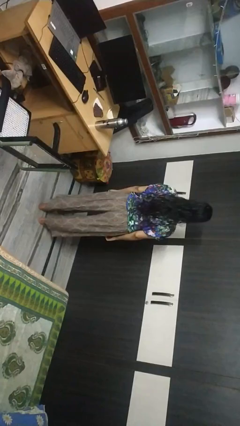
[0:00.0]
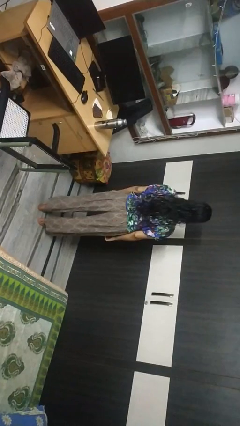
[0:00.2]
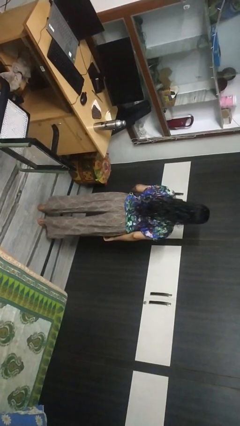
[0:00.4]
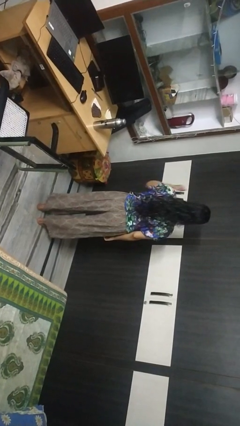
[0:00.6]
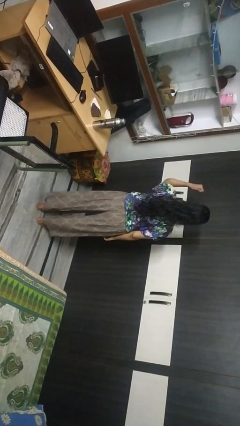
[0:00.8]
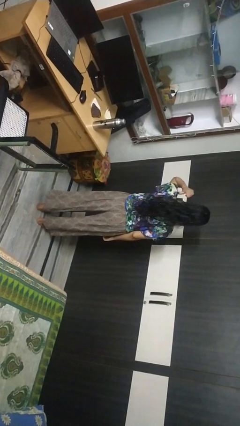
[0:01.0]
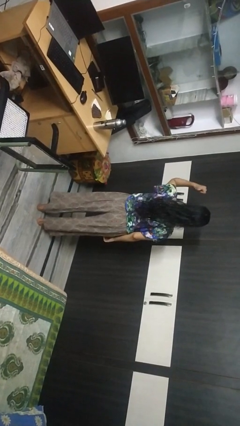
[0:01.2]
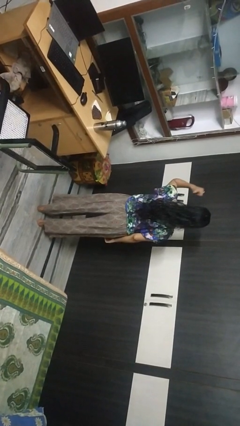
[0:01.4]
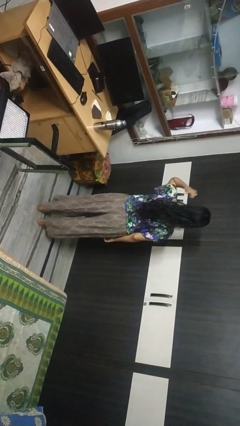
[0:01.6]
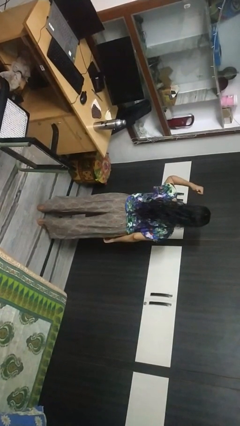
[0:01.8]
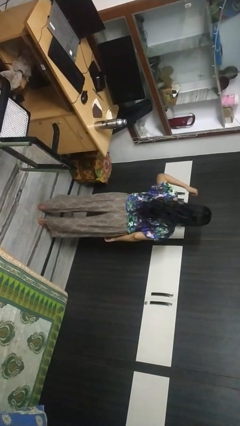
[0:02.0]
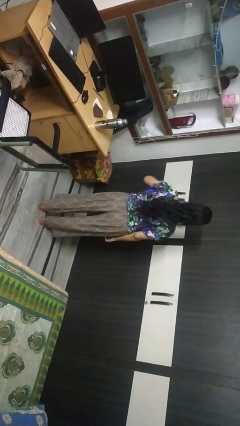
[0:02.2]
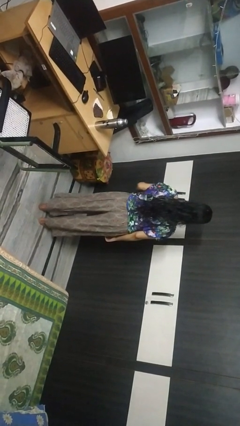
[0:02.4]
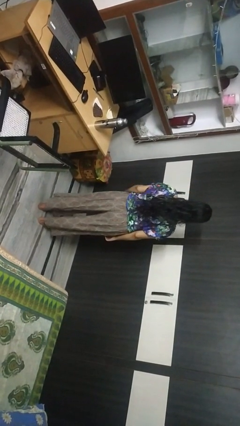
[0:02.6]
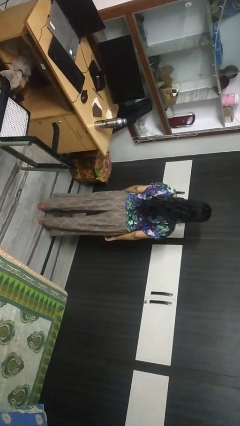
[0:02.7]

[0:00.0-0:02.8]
person gestures behind me

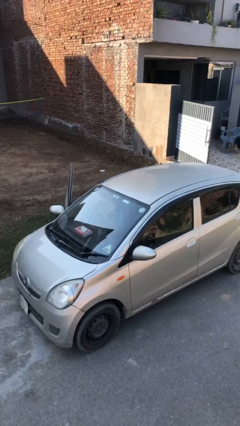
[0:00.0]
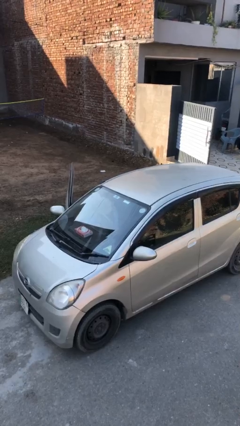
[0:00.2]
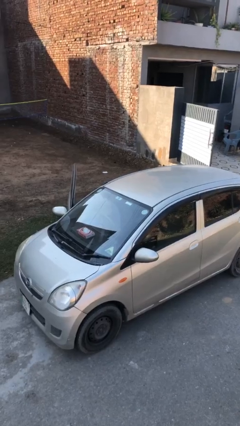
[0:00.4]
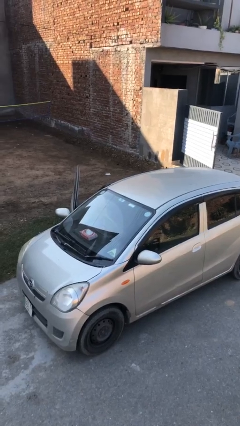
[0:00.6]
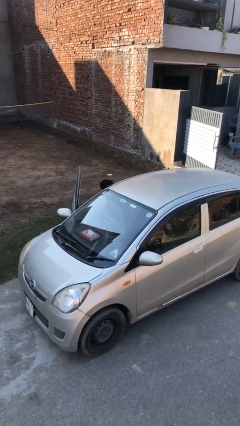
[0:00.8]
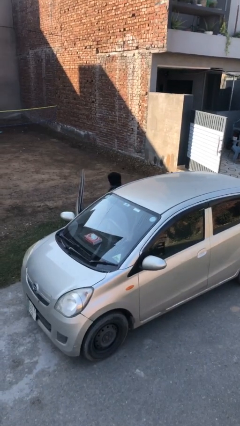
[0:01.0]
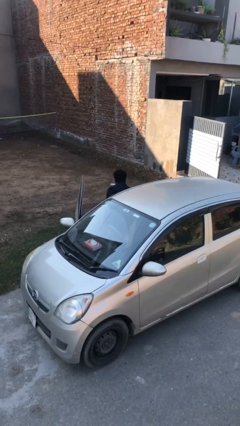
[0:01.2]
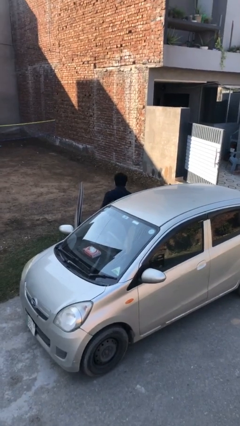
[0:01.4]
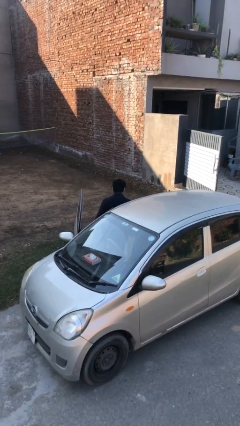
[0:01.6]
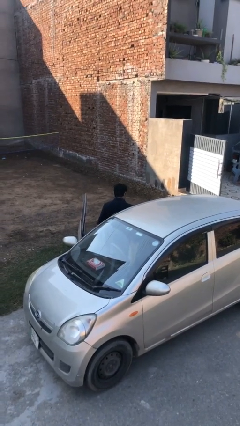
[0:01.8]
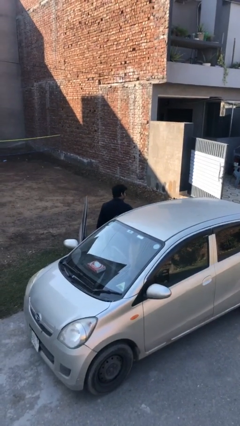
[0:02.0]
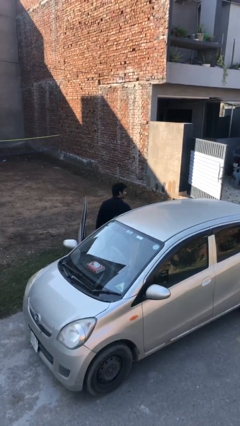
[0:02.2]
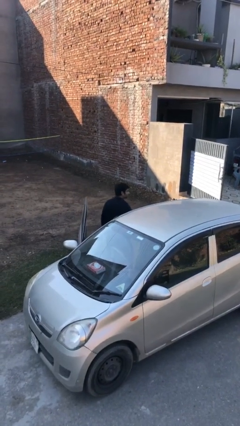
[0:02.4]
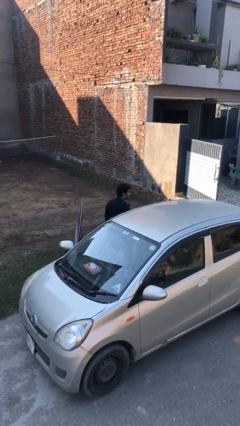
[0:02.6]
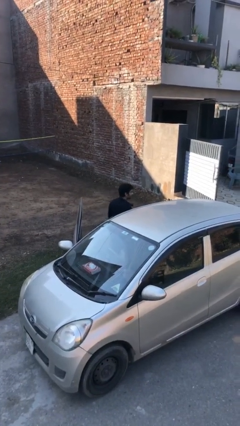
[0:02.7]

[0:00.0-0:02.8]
person exits car

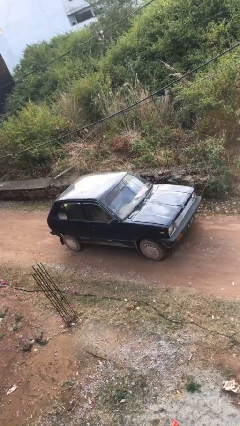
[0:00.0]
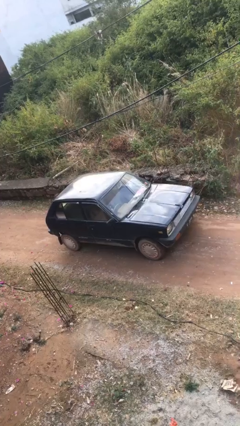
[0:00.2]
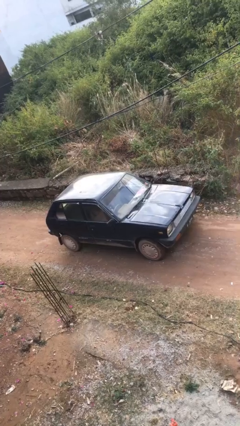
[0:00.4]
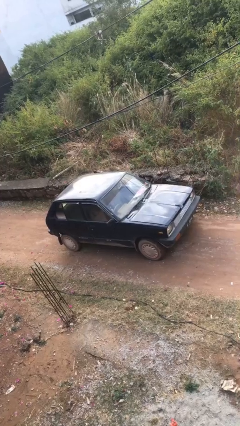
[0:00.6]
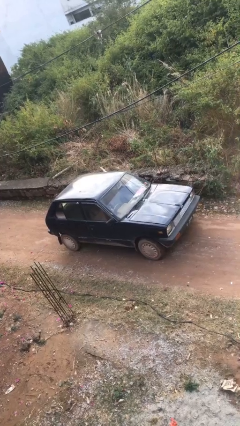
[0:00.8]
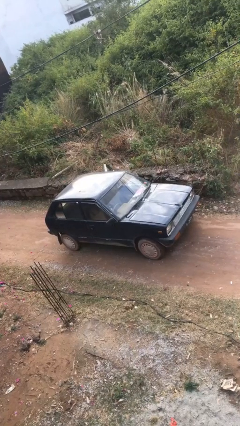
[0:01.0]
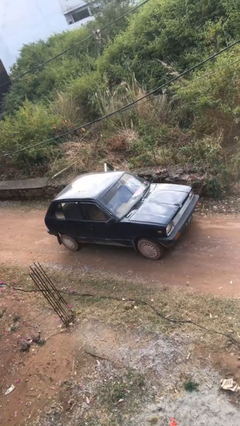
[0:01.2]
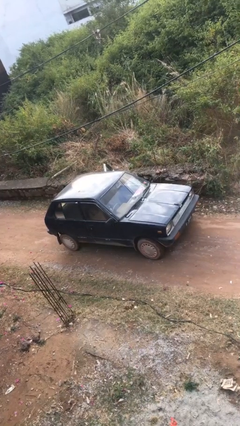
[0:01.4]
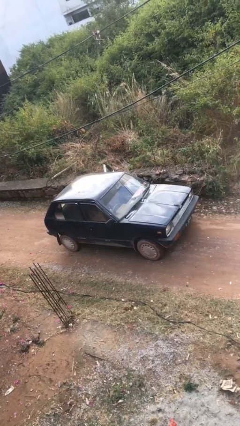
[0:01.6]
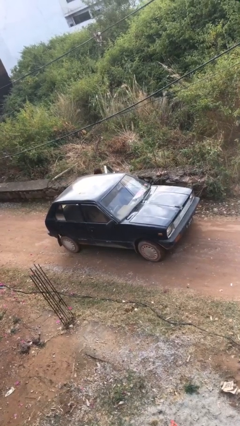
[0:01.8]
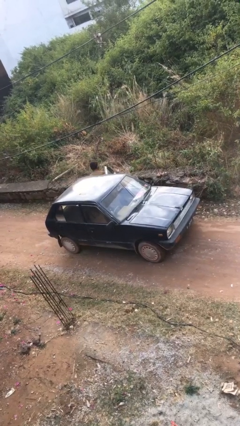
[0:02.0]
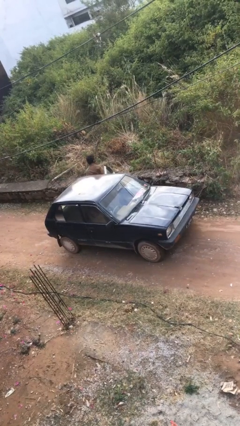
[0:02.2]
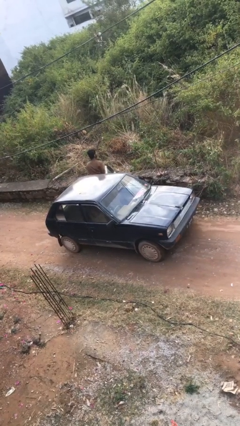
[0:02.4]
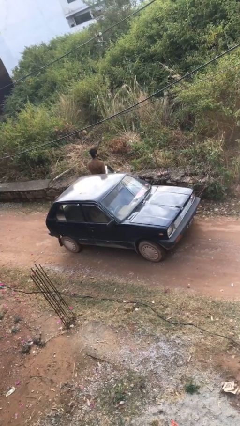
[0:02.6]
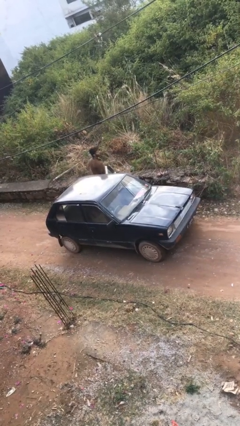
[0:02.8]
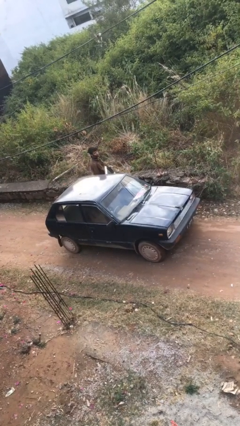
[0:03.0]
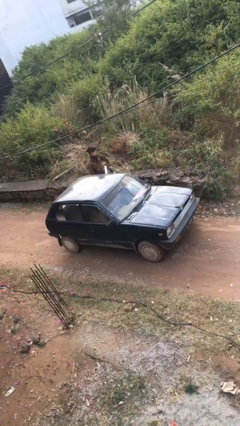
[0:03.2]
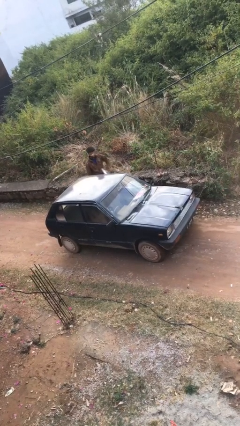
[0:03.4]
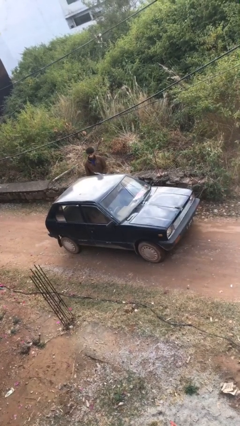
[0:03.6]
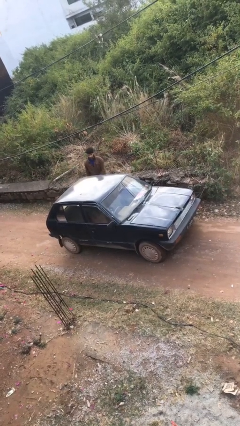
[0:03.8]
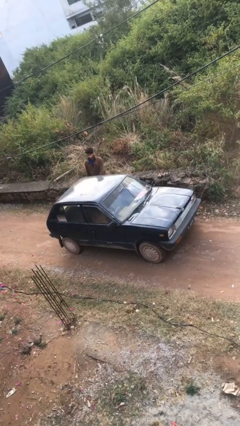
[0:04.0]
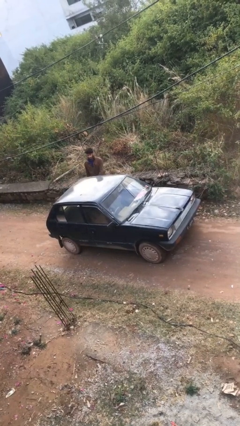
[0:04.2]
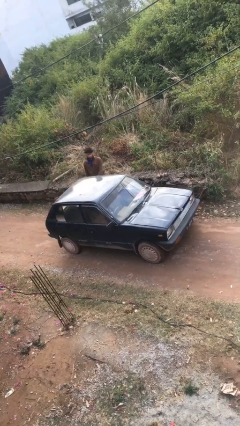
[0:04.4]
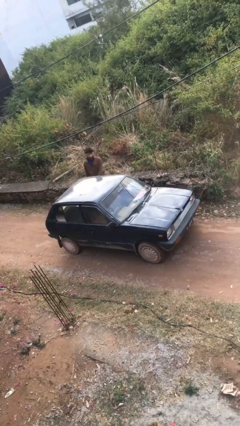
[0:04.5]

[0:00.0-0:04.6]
car drops off person

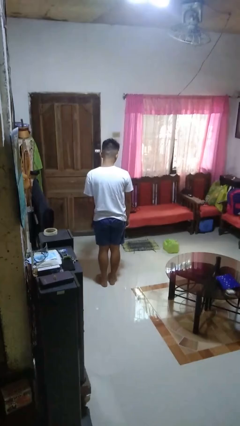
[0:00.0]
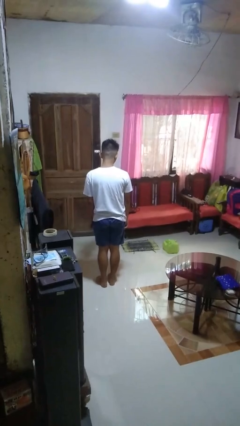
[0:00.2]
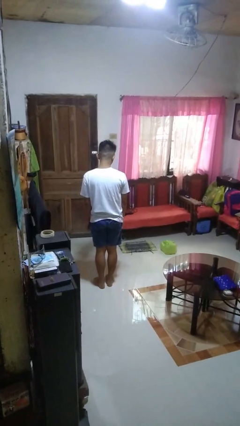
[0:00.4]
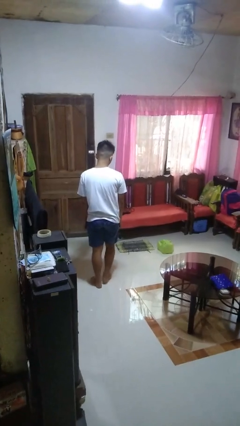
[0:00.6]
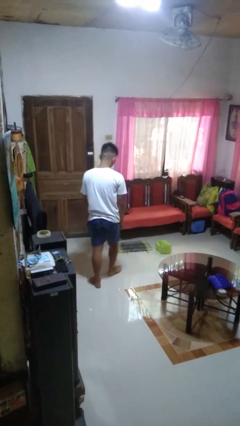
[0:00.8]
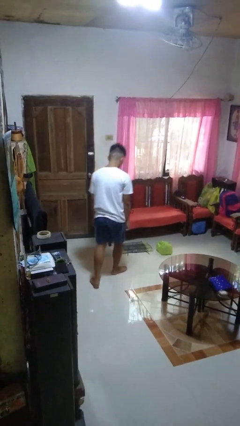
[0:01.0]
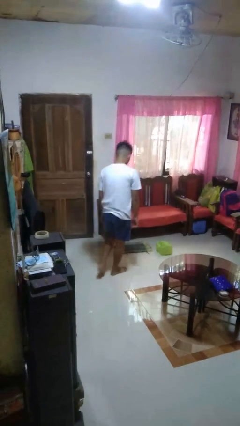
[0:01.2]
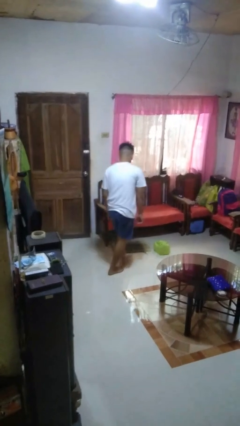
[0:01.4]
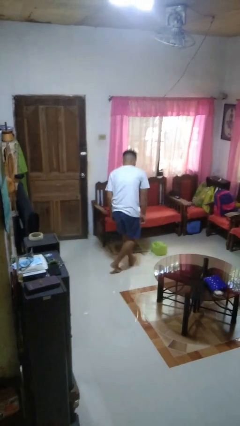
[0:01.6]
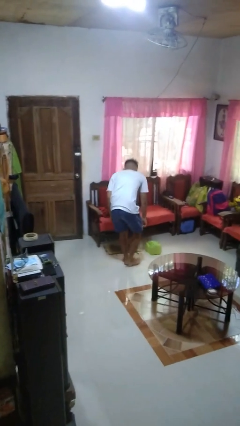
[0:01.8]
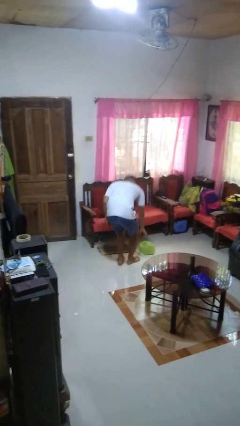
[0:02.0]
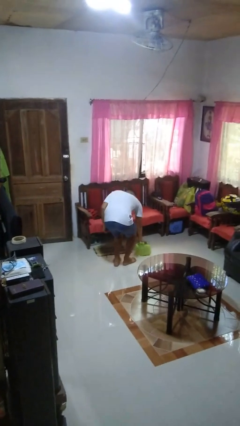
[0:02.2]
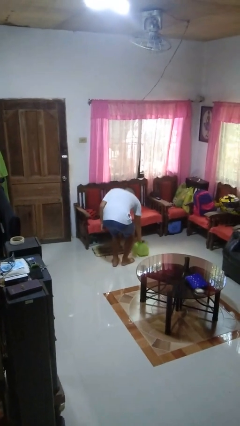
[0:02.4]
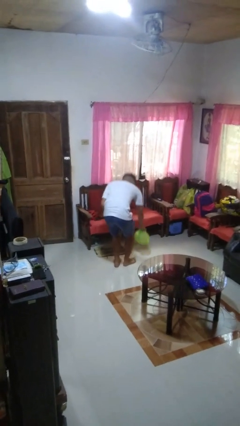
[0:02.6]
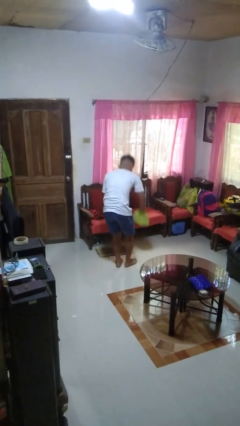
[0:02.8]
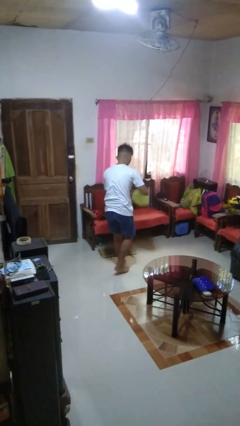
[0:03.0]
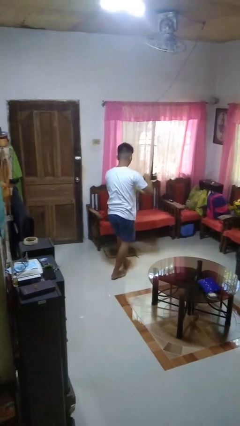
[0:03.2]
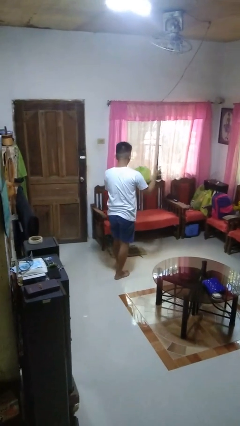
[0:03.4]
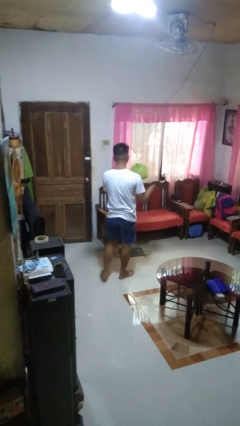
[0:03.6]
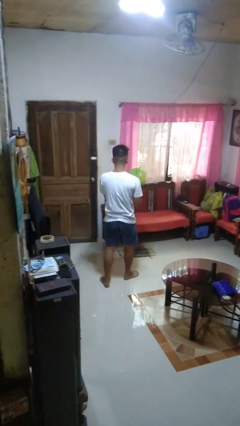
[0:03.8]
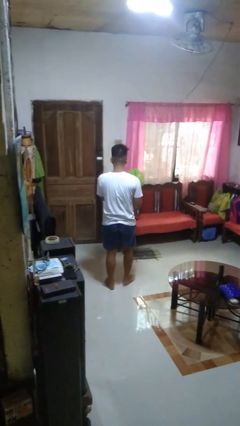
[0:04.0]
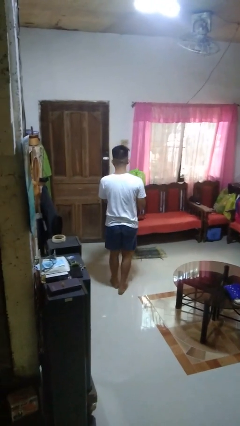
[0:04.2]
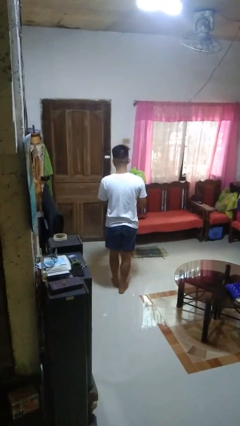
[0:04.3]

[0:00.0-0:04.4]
person picks up object from floor

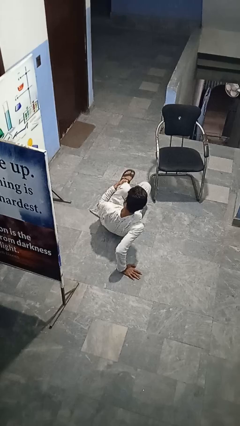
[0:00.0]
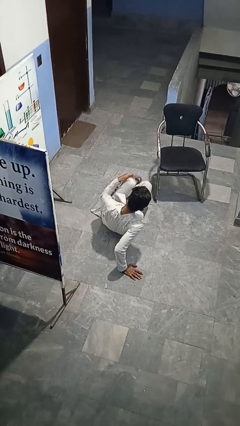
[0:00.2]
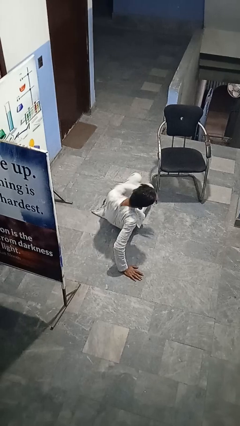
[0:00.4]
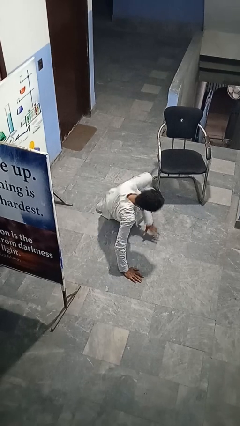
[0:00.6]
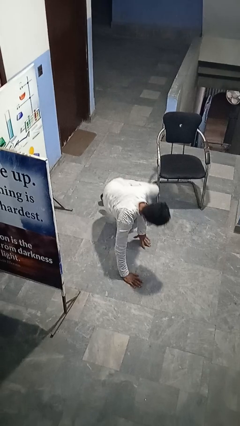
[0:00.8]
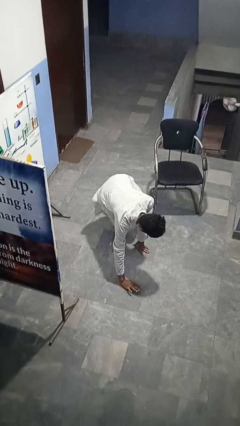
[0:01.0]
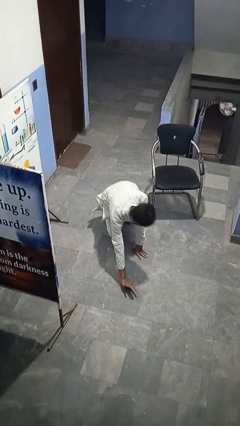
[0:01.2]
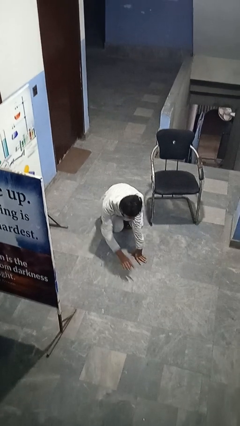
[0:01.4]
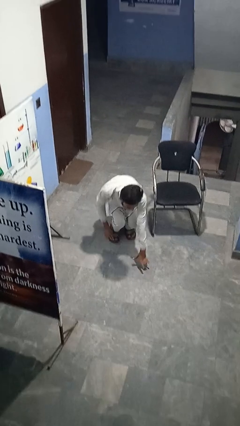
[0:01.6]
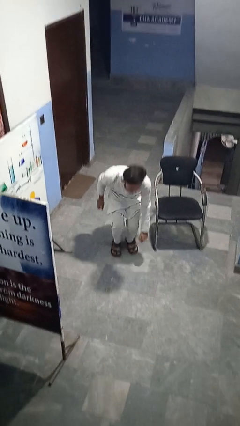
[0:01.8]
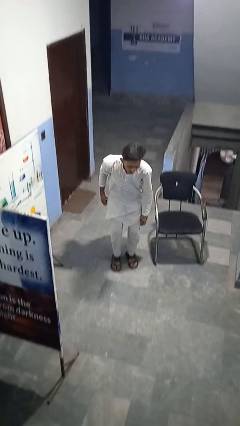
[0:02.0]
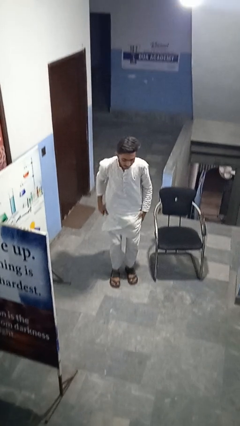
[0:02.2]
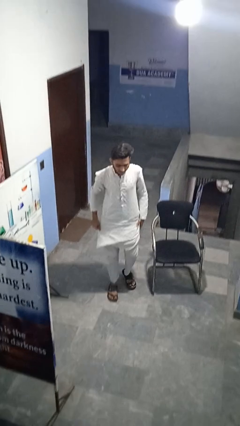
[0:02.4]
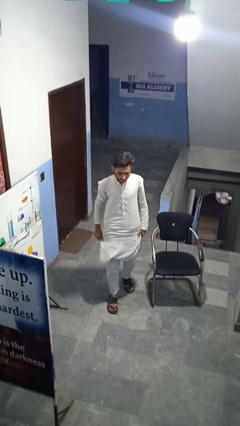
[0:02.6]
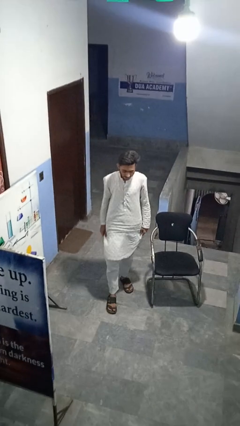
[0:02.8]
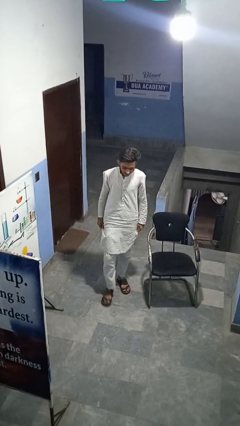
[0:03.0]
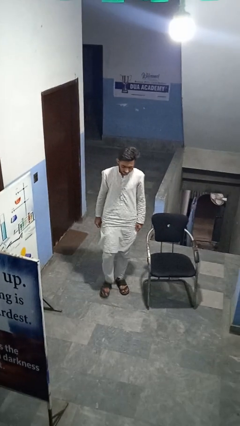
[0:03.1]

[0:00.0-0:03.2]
person stands up from floor
